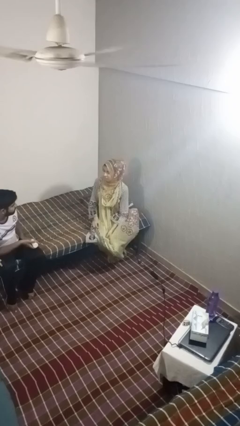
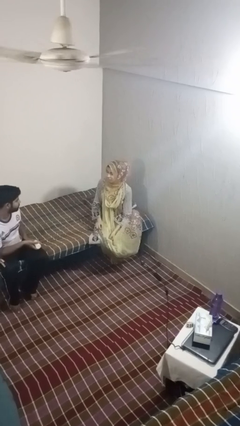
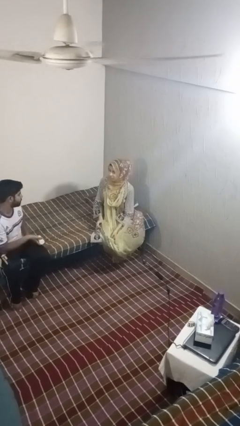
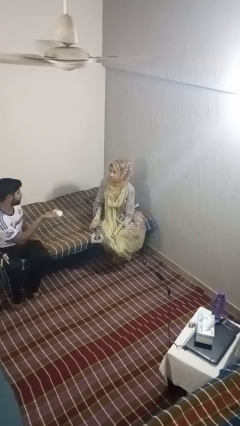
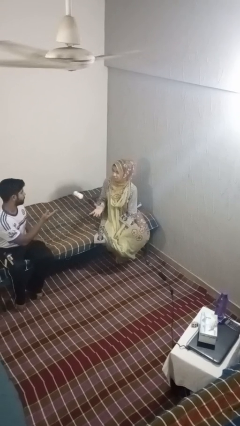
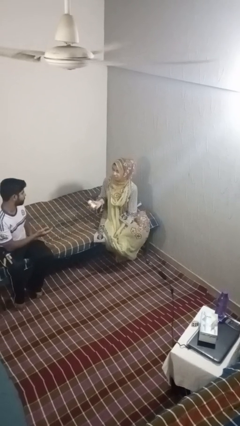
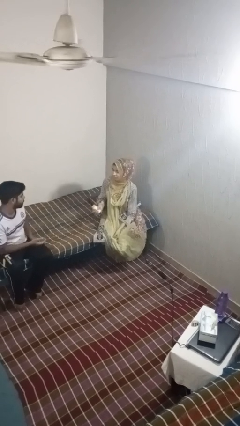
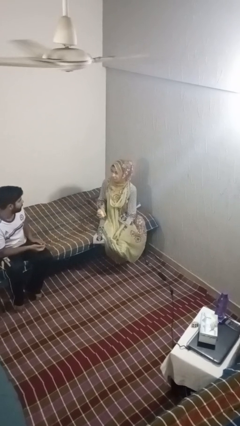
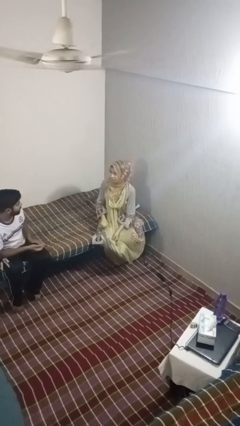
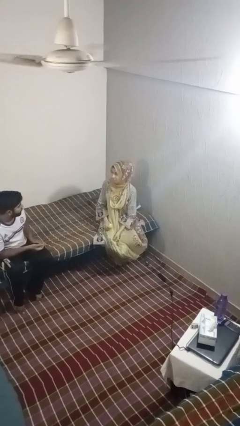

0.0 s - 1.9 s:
person catches object from person

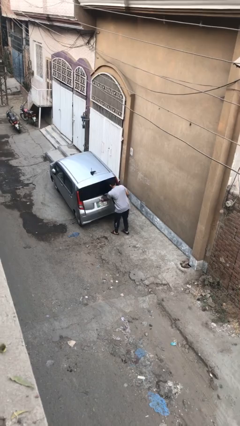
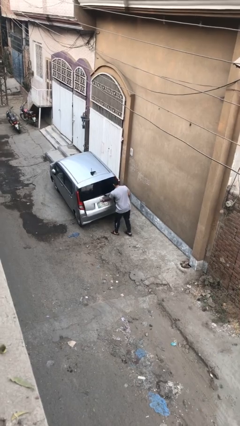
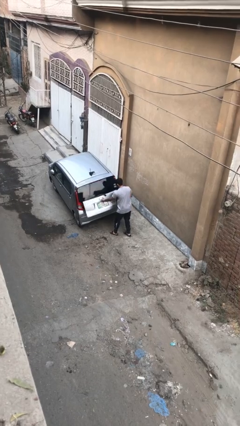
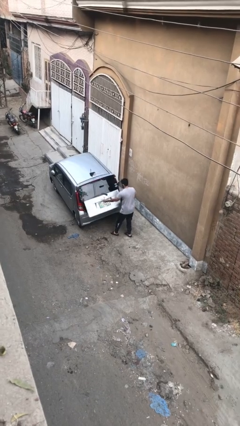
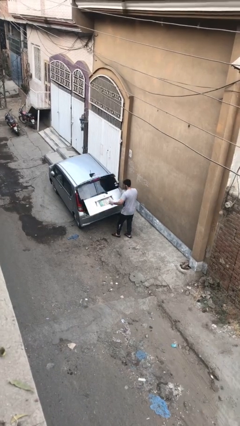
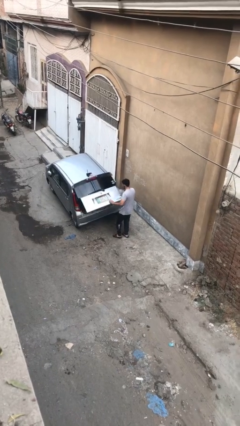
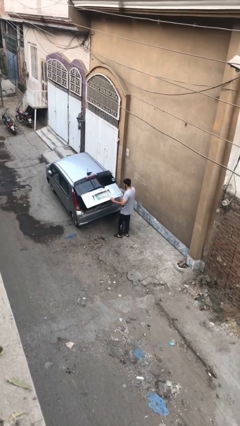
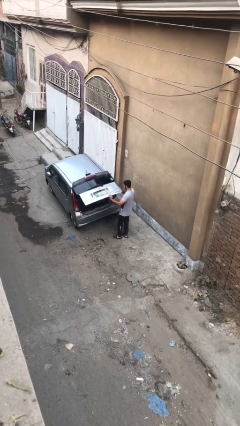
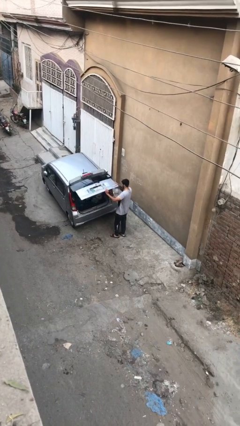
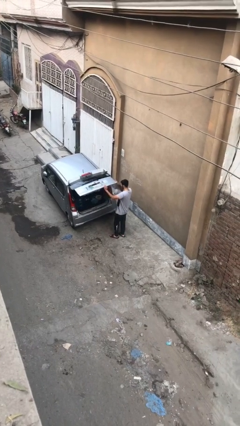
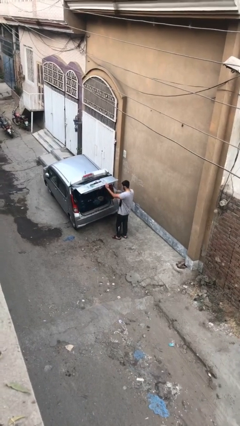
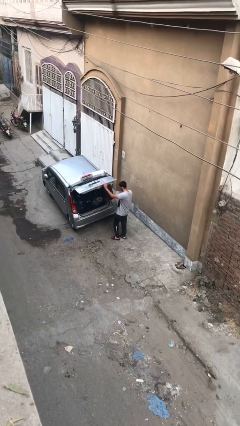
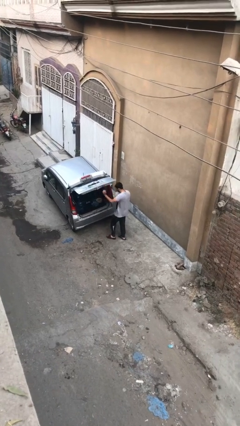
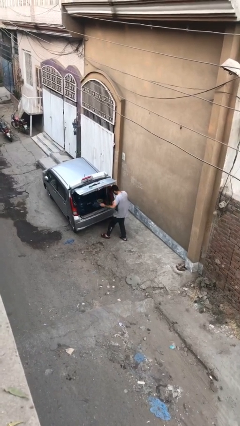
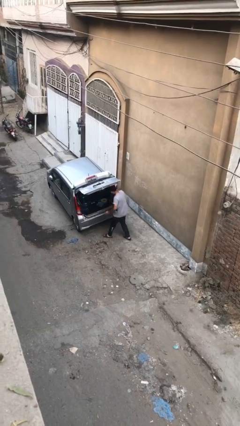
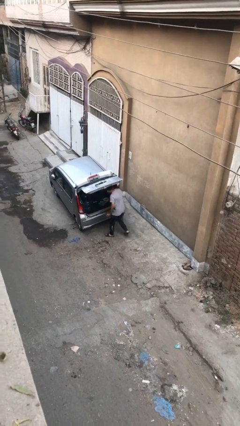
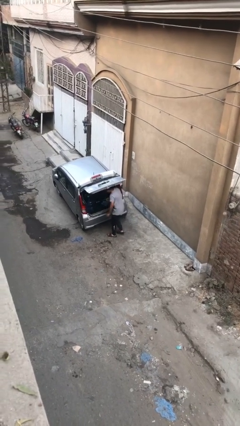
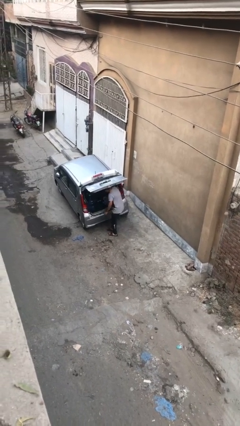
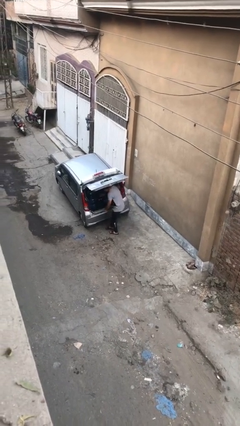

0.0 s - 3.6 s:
person opens car trunk

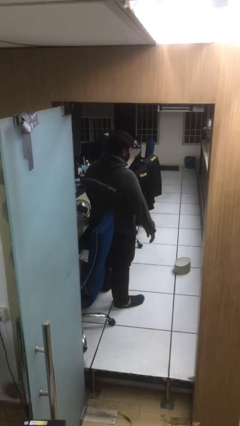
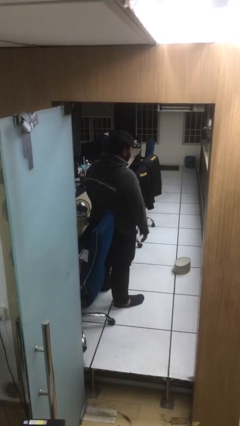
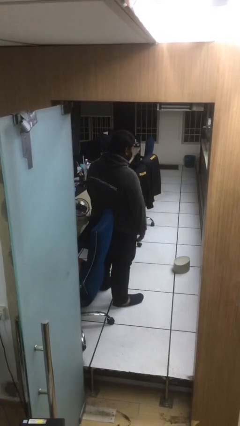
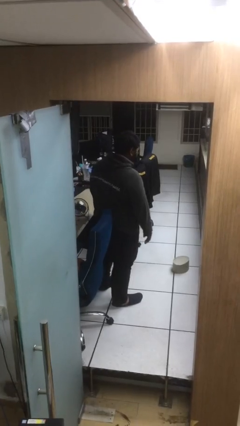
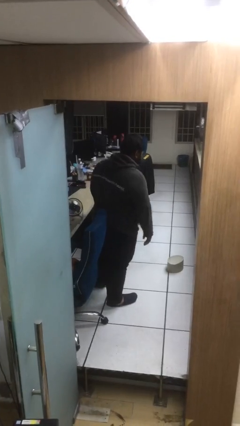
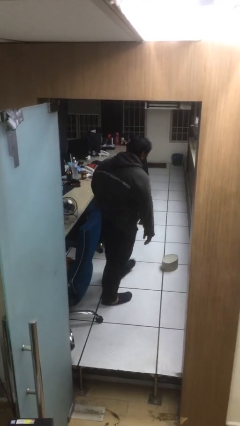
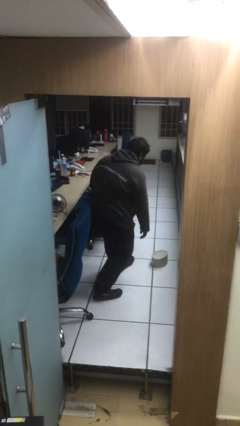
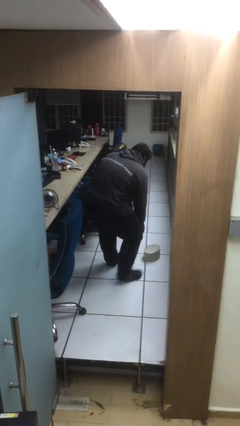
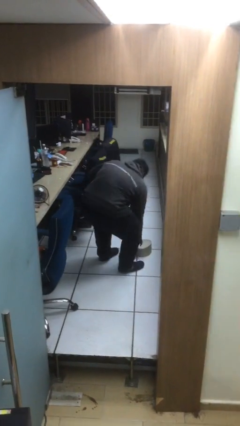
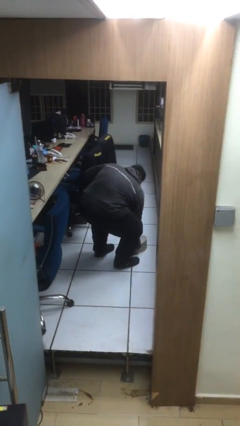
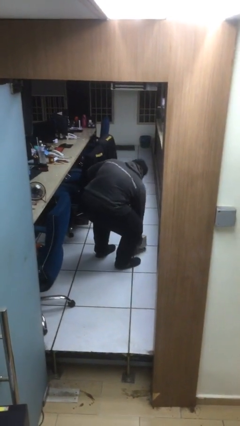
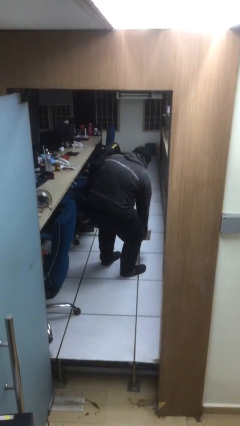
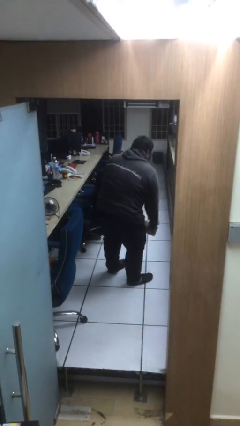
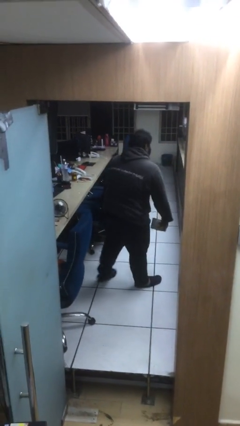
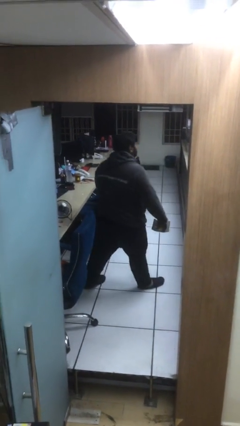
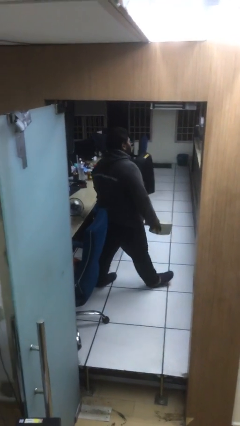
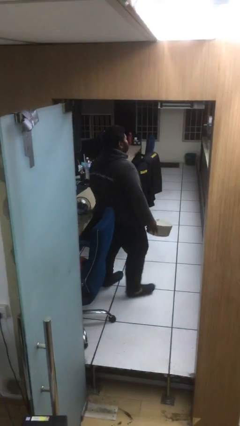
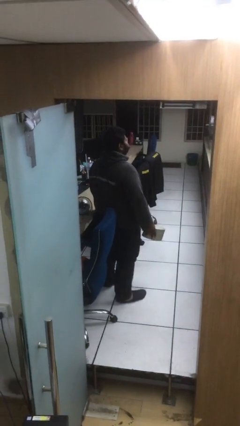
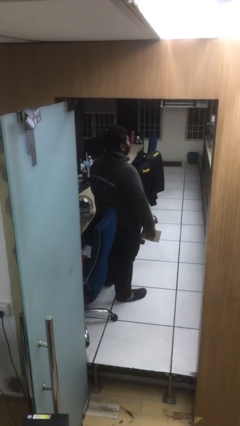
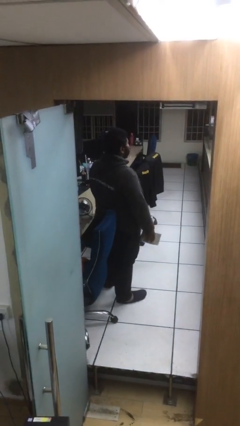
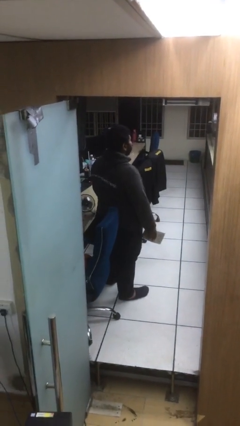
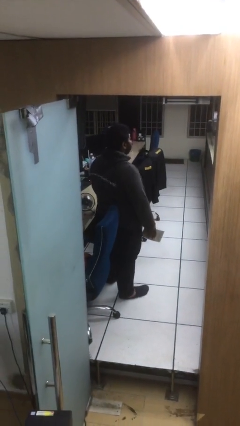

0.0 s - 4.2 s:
person picks up object from floor

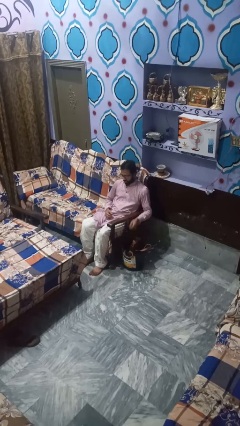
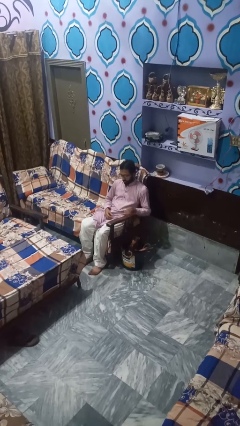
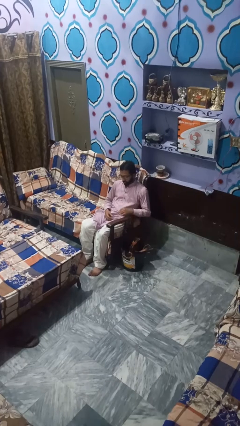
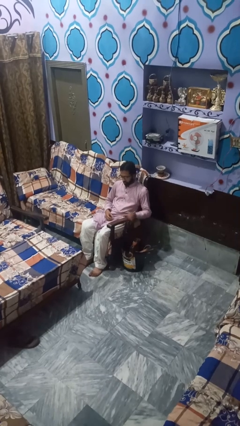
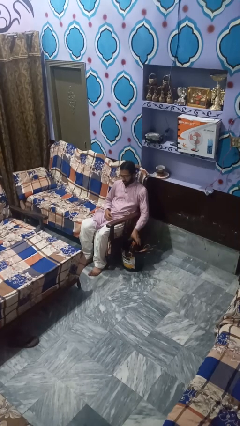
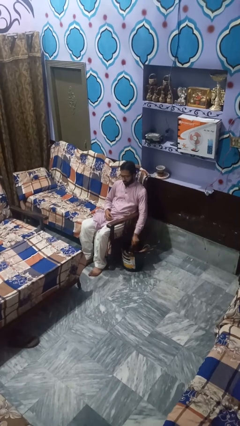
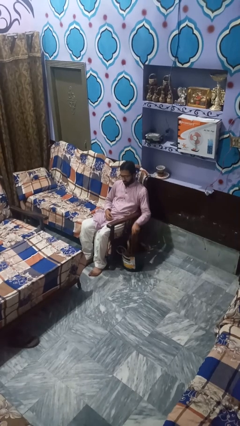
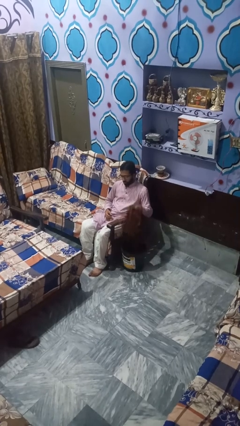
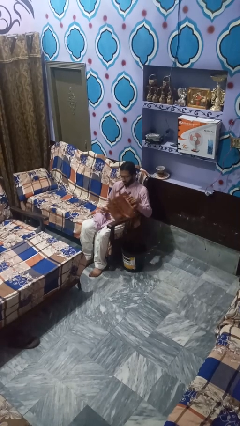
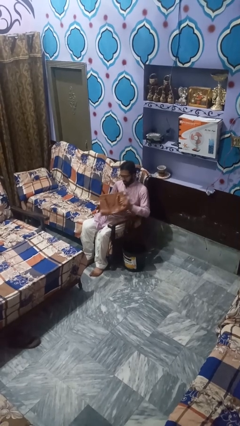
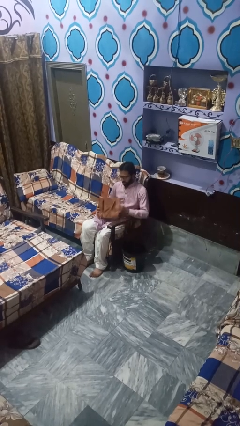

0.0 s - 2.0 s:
person takes object from basket

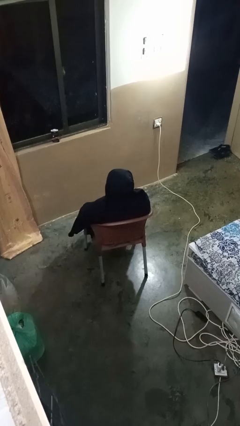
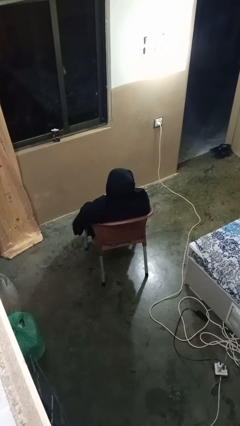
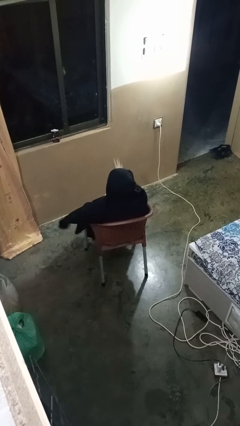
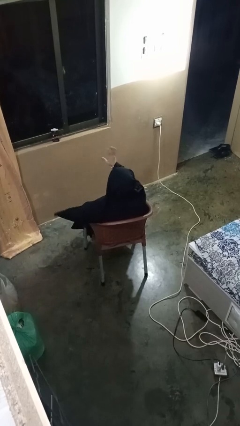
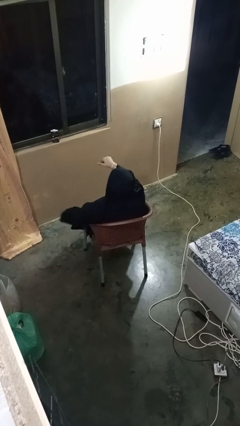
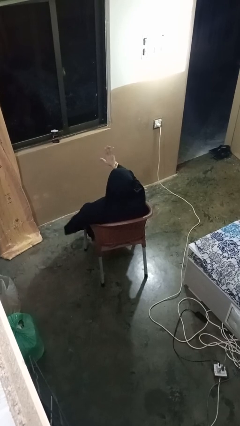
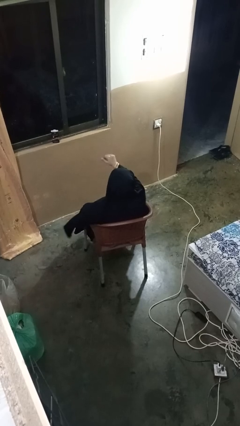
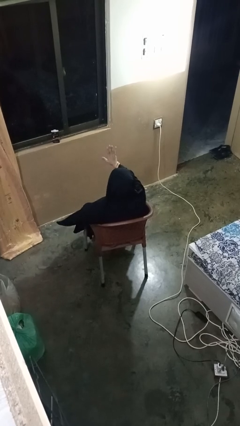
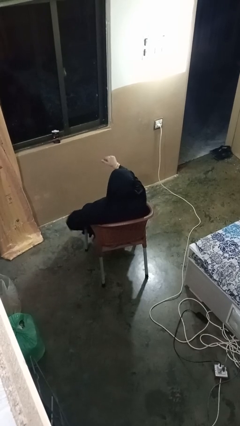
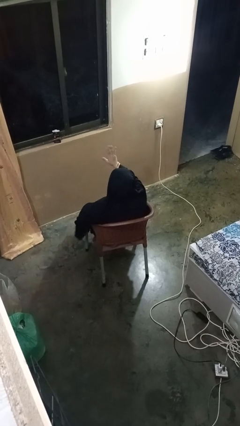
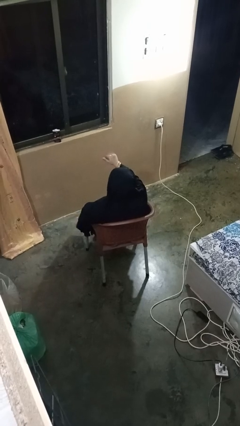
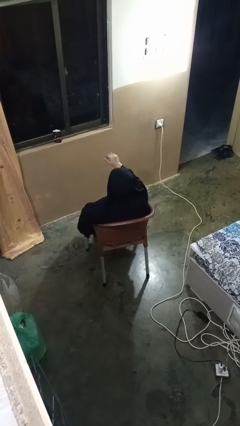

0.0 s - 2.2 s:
person gestures come here

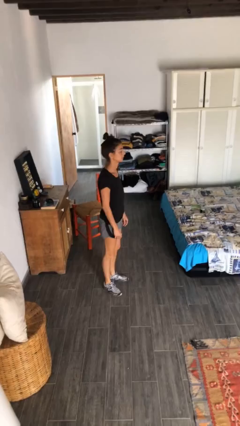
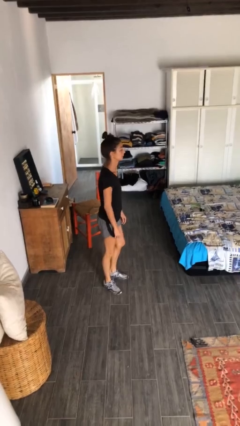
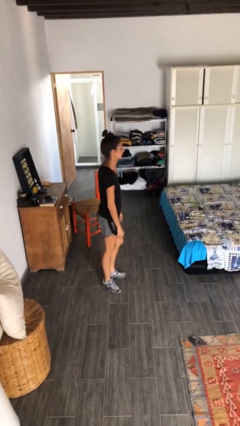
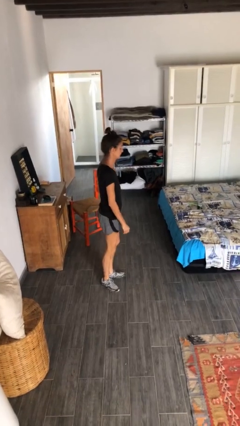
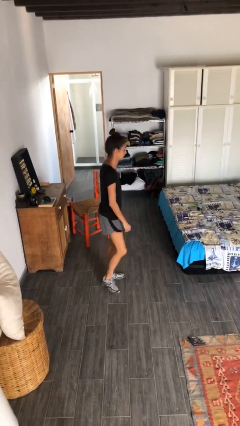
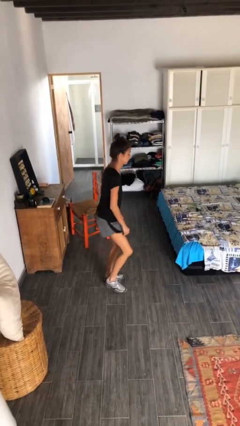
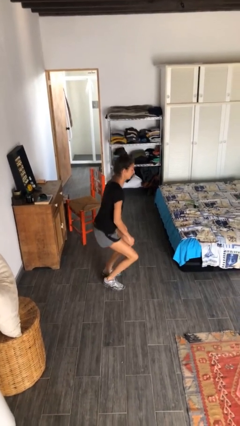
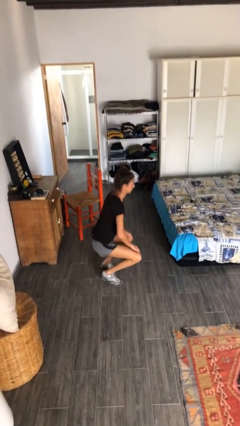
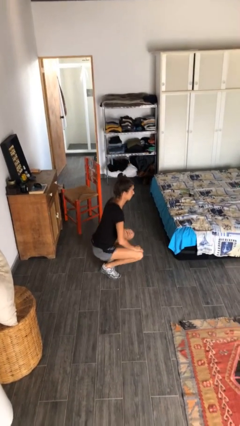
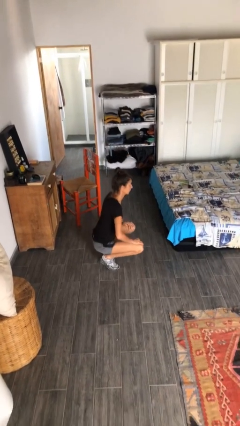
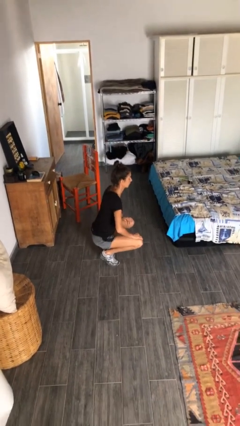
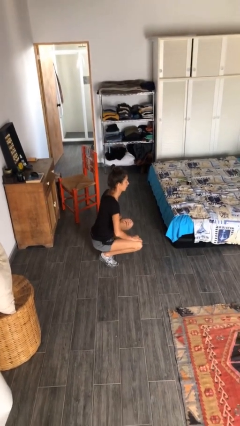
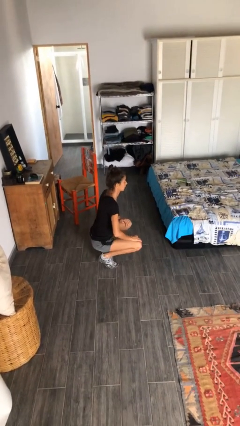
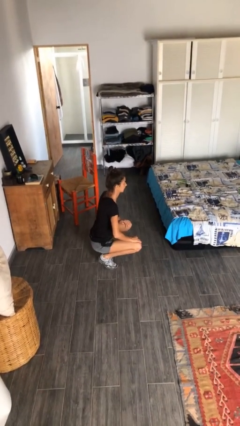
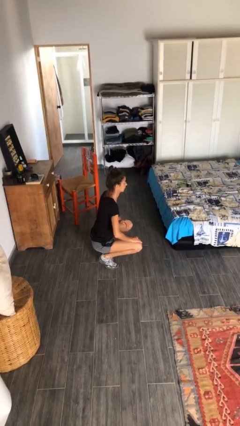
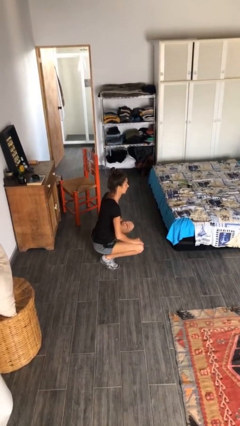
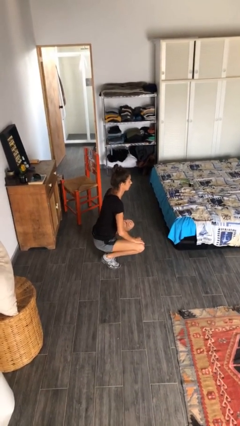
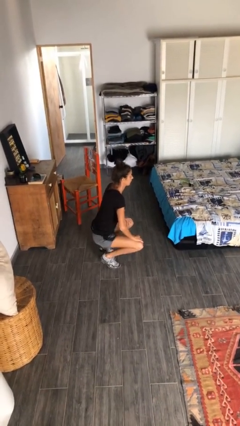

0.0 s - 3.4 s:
person squats

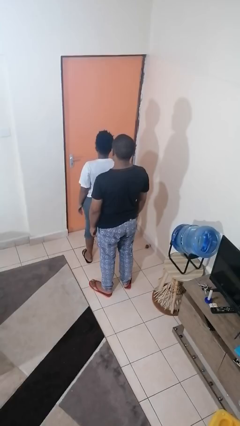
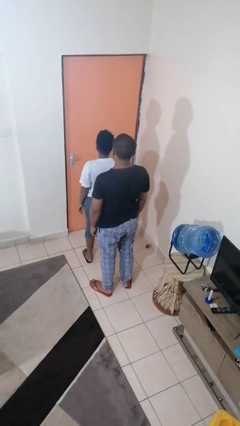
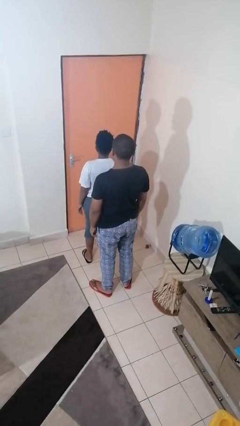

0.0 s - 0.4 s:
person tickles person
